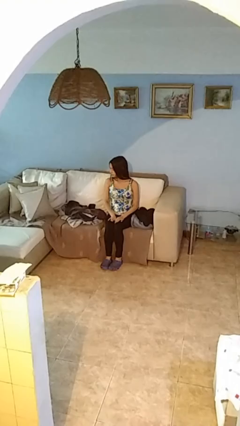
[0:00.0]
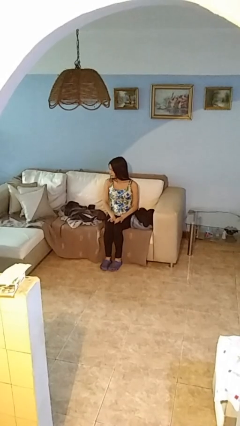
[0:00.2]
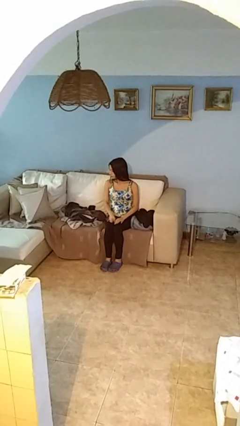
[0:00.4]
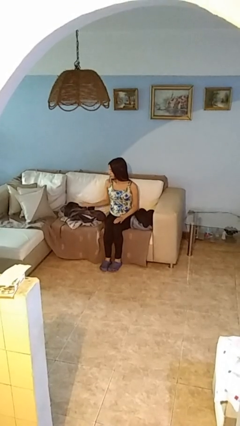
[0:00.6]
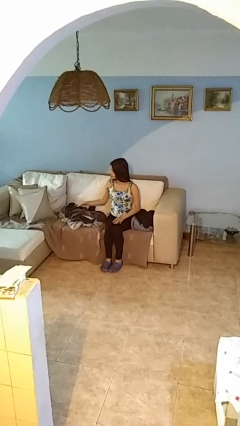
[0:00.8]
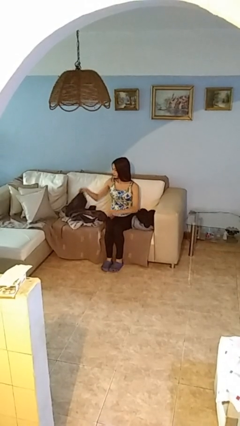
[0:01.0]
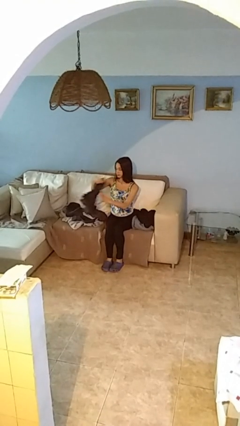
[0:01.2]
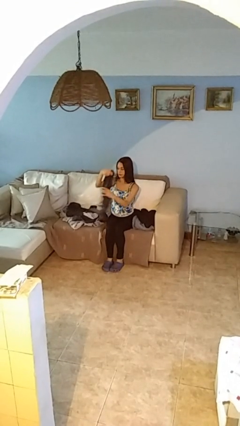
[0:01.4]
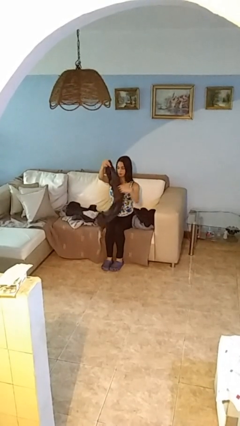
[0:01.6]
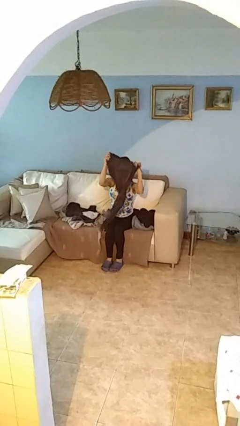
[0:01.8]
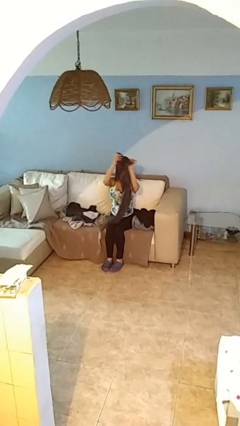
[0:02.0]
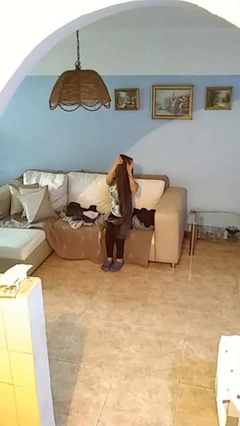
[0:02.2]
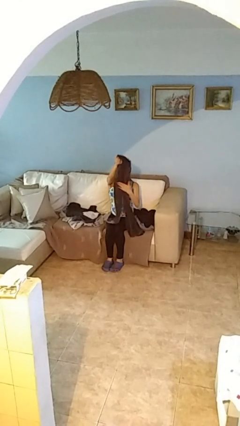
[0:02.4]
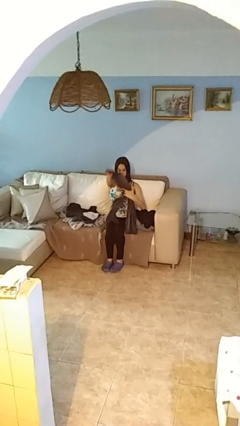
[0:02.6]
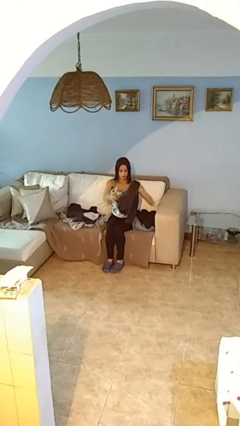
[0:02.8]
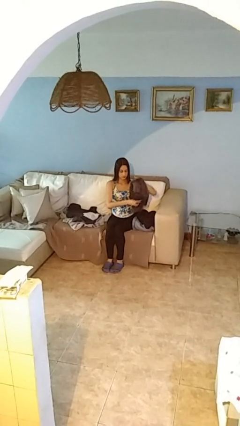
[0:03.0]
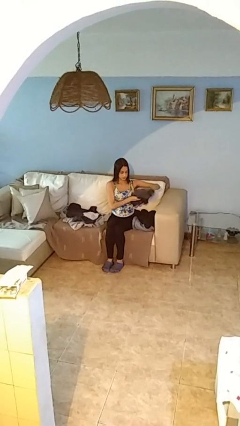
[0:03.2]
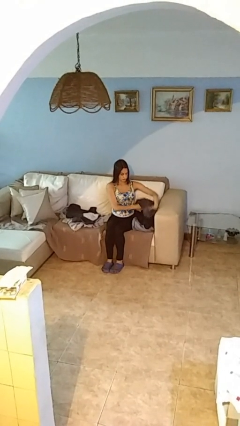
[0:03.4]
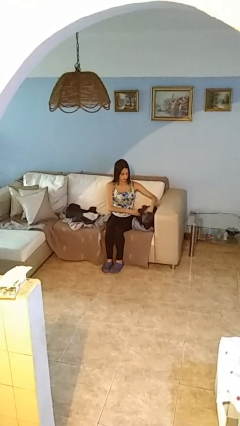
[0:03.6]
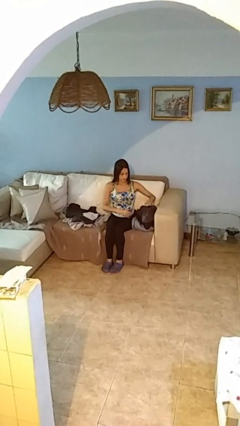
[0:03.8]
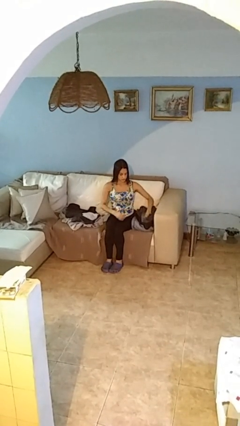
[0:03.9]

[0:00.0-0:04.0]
person folds pants

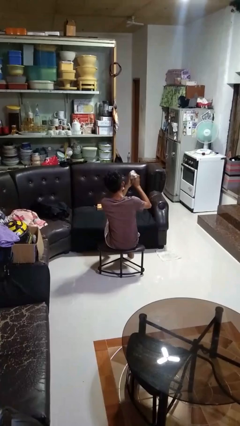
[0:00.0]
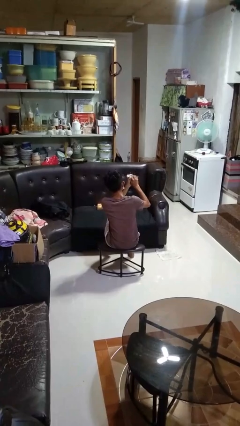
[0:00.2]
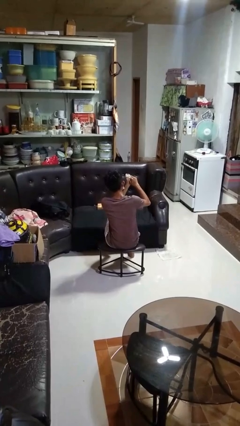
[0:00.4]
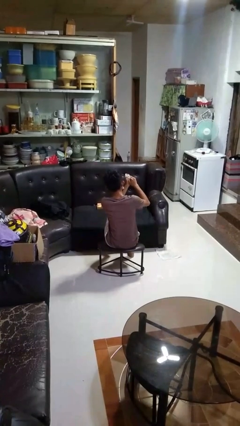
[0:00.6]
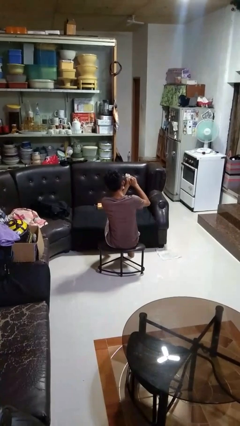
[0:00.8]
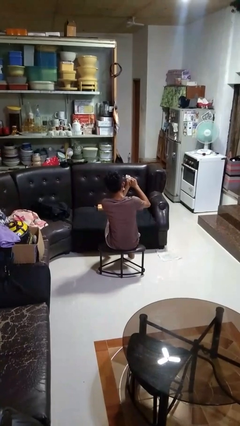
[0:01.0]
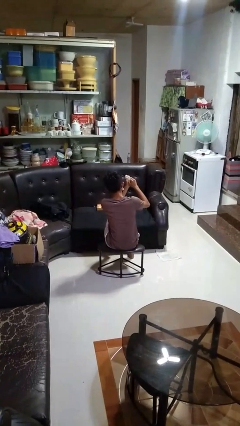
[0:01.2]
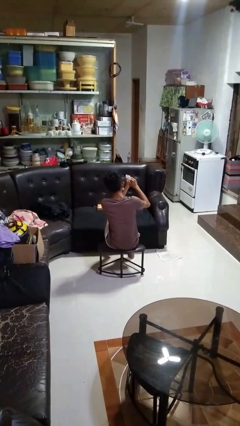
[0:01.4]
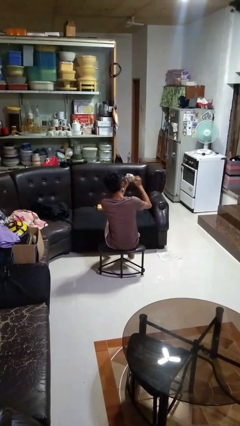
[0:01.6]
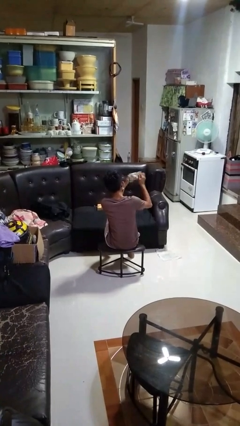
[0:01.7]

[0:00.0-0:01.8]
person crumples paper

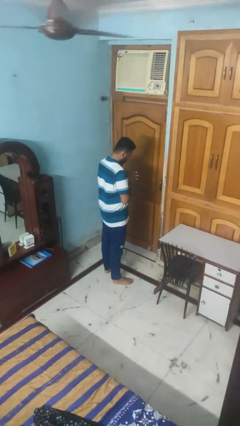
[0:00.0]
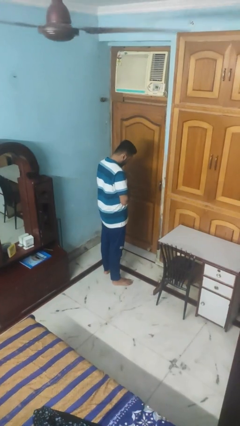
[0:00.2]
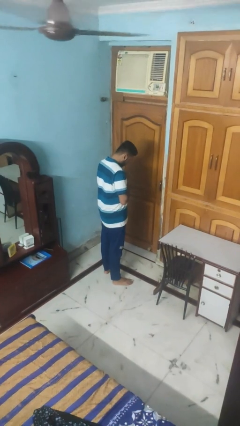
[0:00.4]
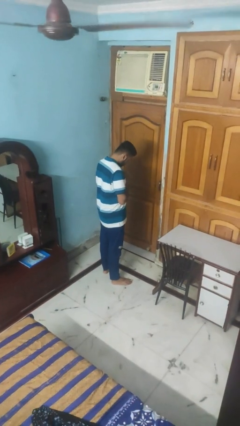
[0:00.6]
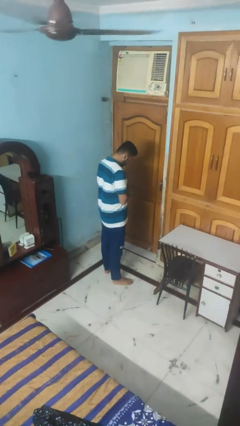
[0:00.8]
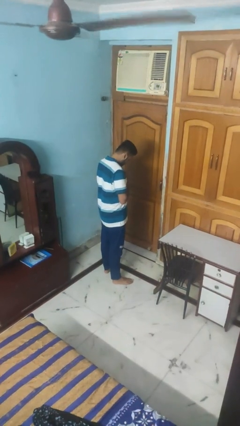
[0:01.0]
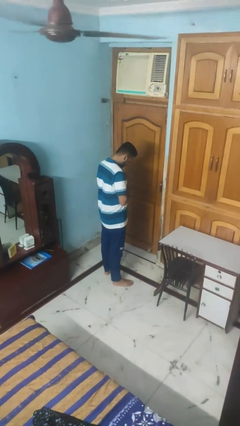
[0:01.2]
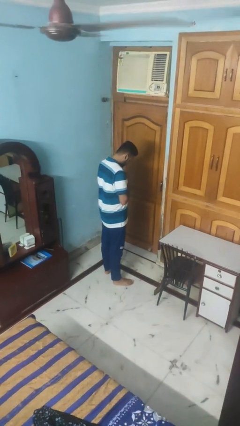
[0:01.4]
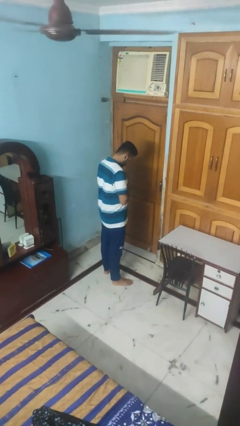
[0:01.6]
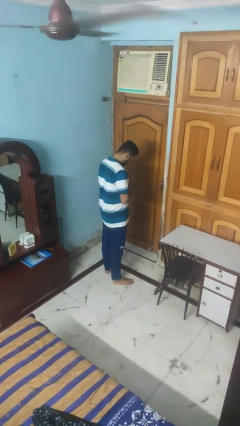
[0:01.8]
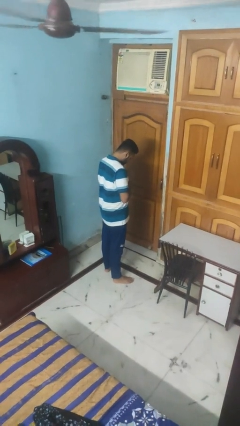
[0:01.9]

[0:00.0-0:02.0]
person prays

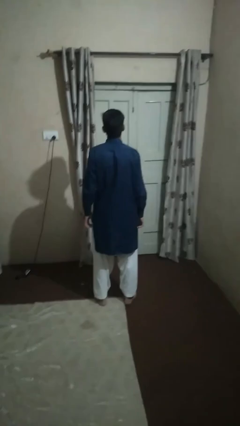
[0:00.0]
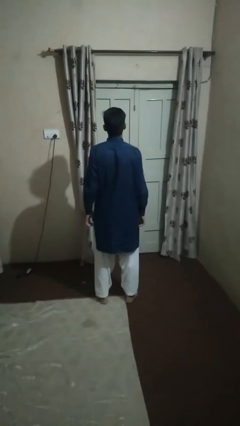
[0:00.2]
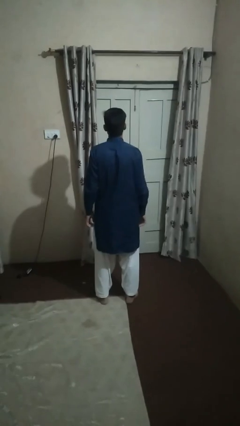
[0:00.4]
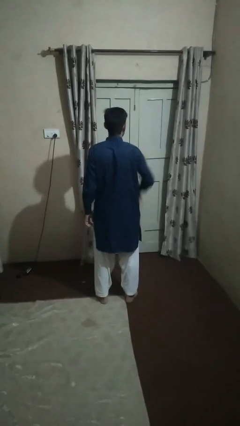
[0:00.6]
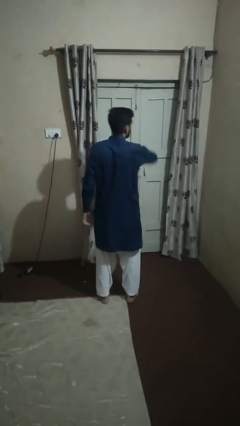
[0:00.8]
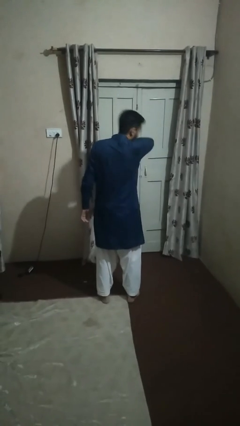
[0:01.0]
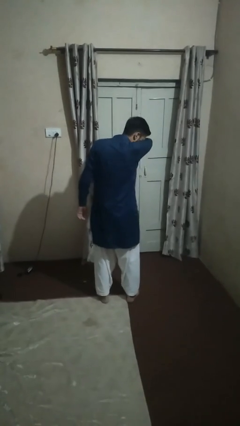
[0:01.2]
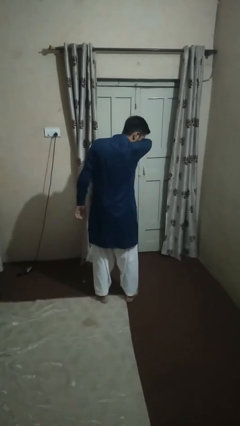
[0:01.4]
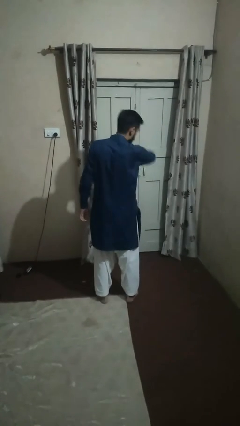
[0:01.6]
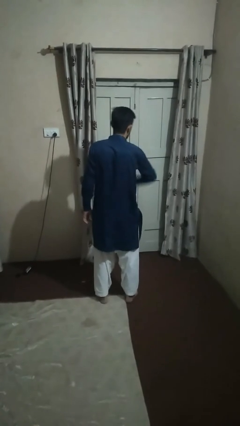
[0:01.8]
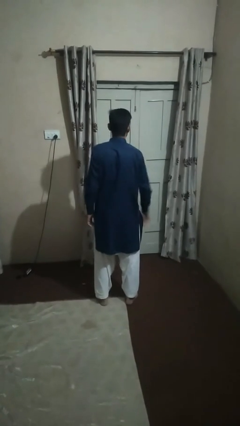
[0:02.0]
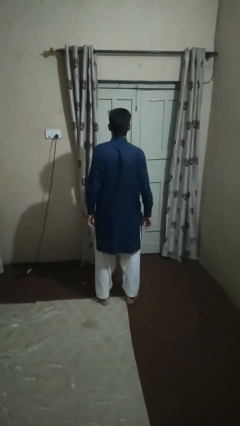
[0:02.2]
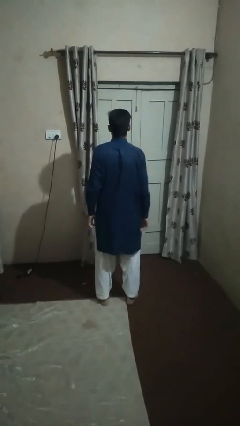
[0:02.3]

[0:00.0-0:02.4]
person sneezes into arm

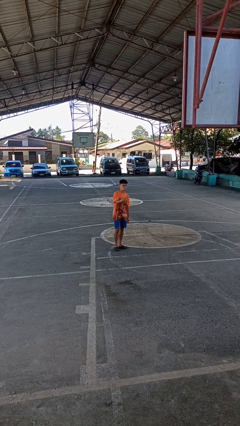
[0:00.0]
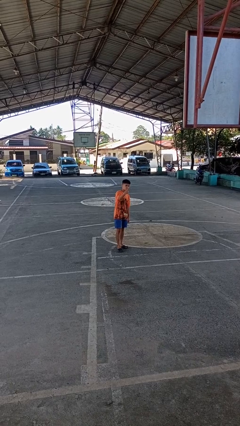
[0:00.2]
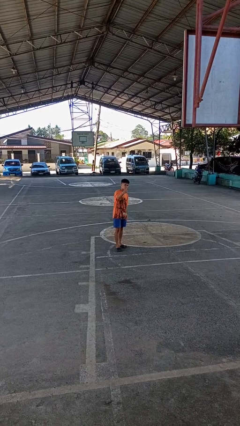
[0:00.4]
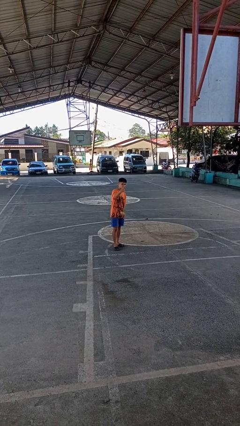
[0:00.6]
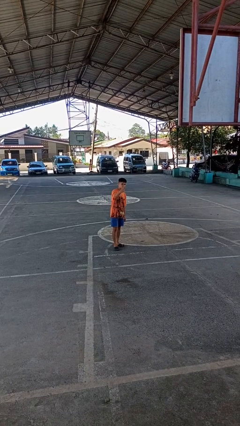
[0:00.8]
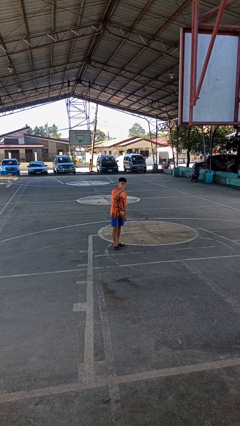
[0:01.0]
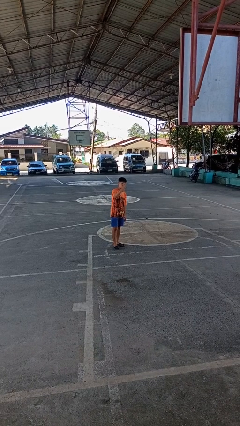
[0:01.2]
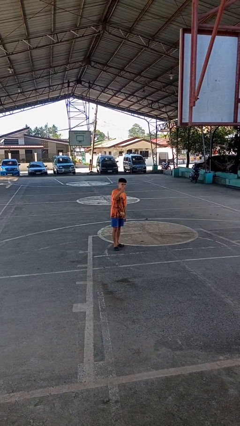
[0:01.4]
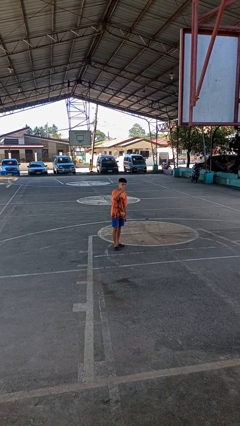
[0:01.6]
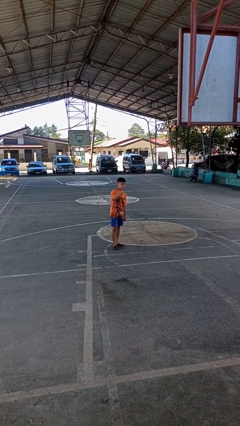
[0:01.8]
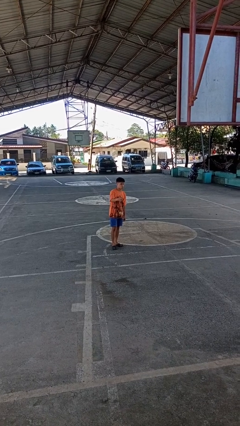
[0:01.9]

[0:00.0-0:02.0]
person gestures peace

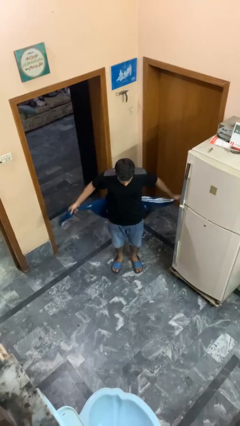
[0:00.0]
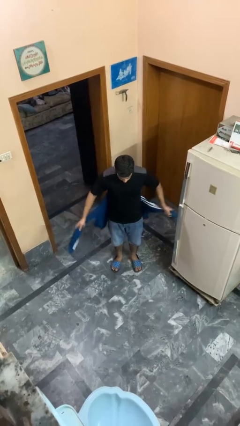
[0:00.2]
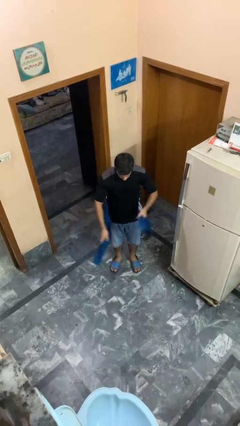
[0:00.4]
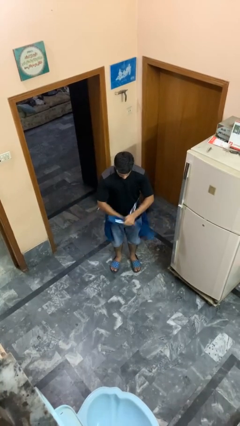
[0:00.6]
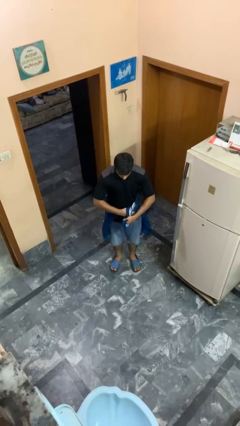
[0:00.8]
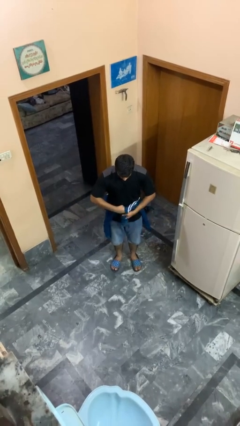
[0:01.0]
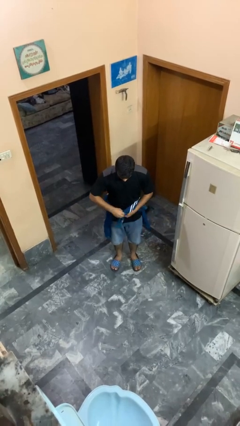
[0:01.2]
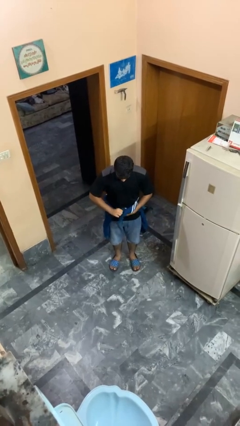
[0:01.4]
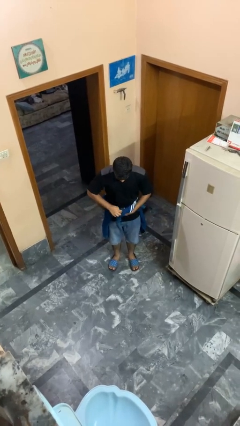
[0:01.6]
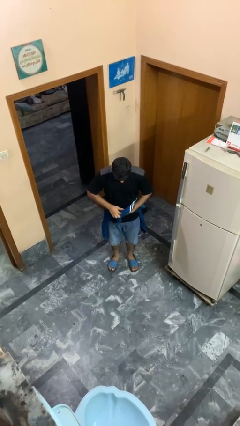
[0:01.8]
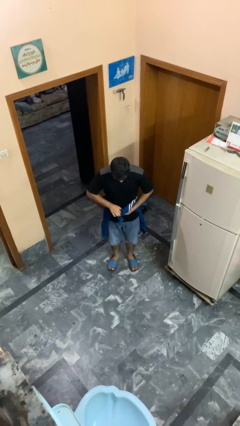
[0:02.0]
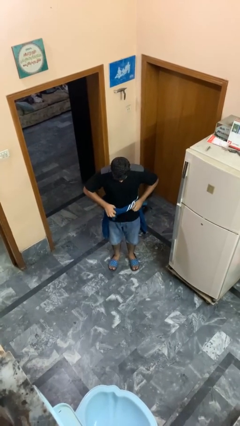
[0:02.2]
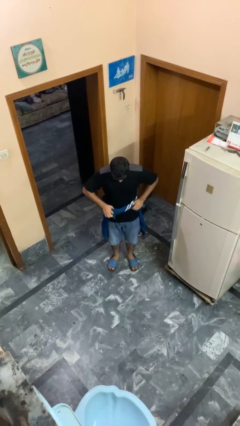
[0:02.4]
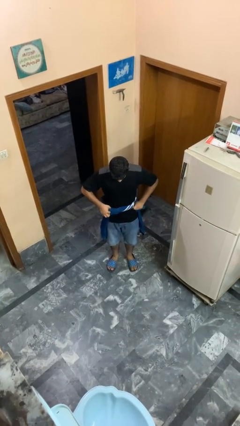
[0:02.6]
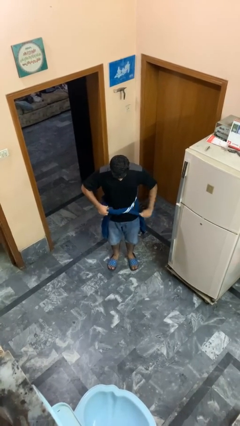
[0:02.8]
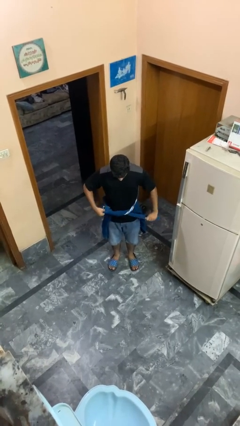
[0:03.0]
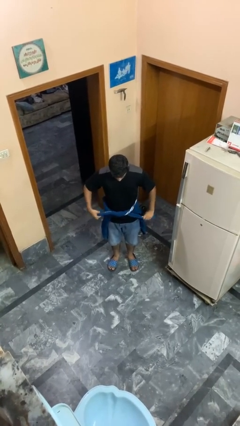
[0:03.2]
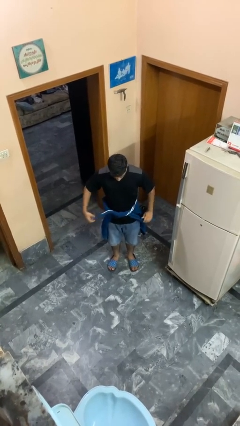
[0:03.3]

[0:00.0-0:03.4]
person ties jacket around waist

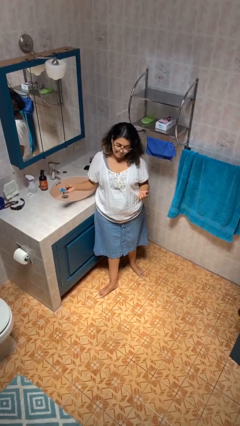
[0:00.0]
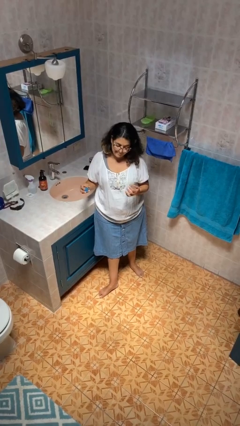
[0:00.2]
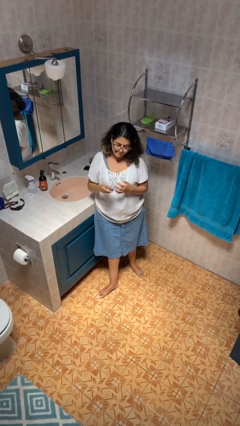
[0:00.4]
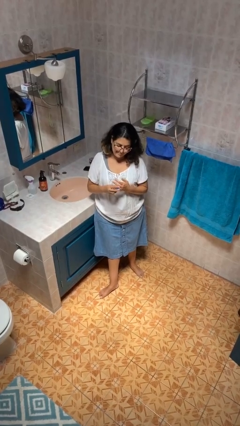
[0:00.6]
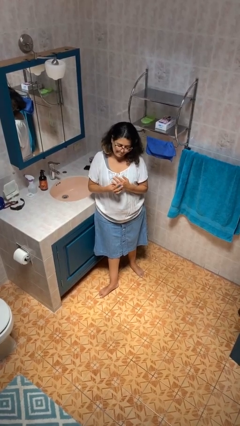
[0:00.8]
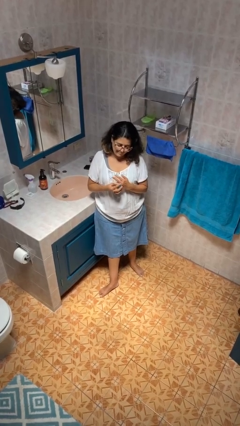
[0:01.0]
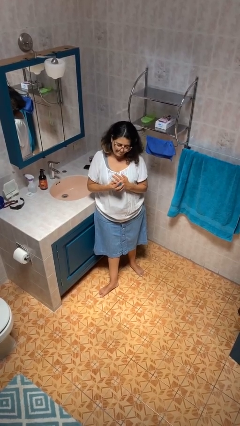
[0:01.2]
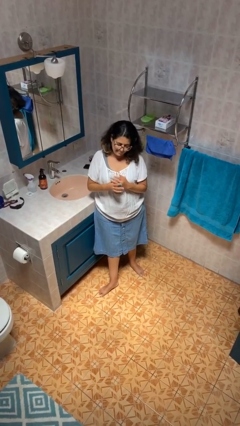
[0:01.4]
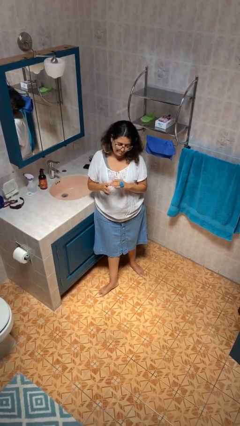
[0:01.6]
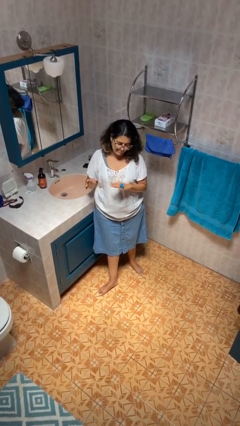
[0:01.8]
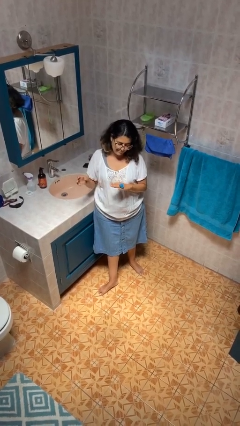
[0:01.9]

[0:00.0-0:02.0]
person puts on ring
